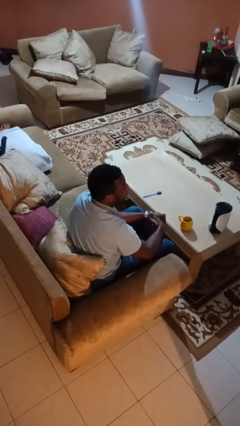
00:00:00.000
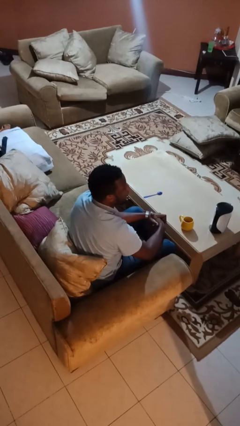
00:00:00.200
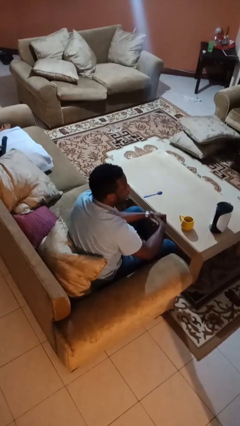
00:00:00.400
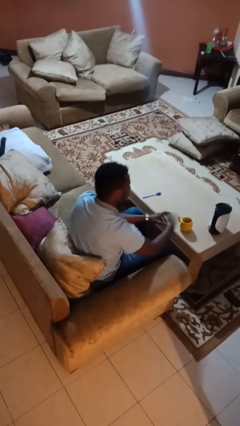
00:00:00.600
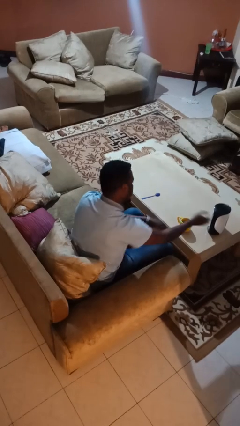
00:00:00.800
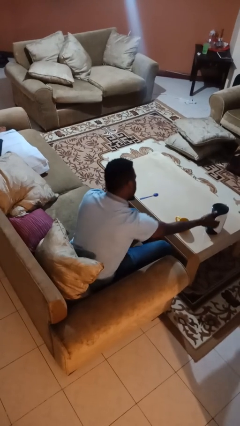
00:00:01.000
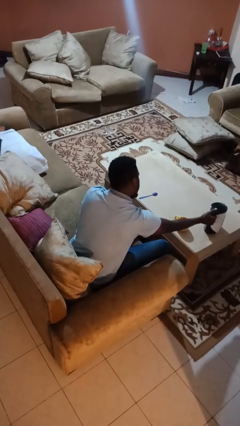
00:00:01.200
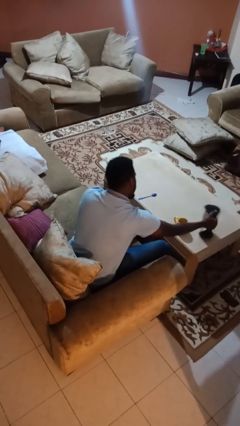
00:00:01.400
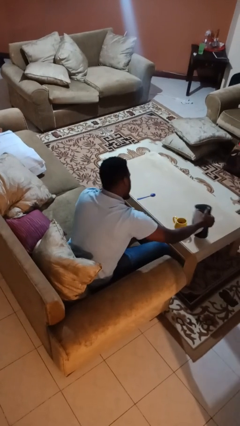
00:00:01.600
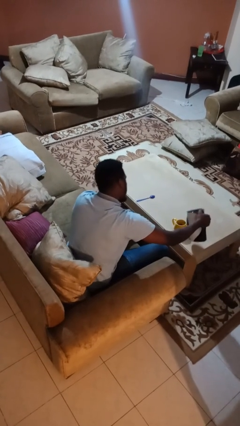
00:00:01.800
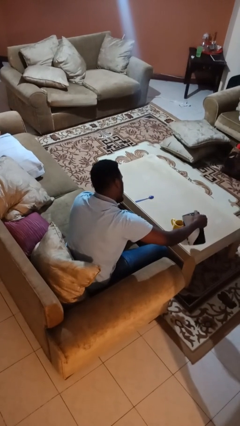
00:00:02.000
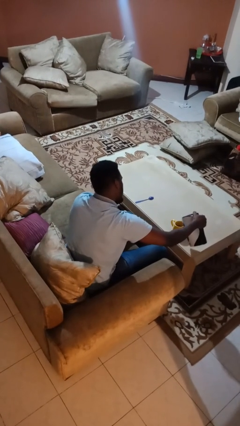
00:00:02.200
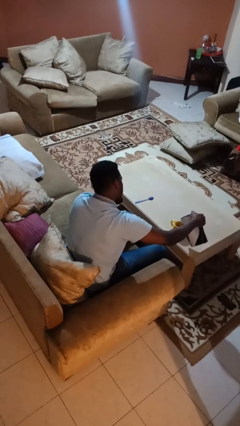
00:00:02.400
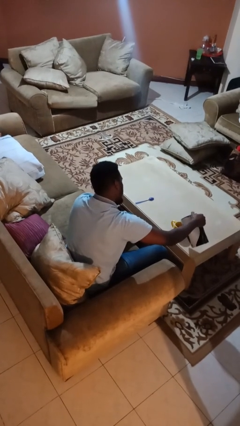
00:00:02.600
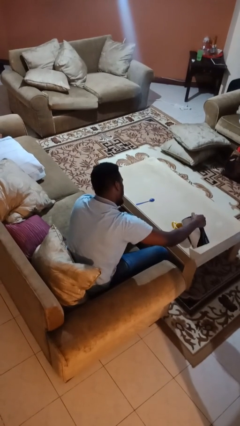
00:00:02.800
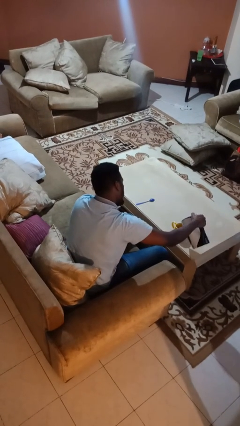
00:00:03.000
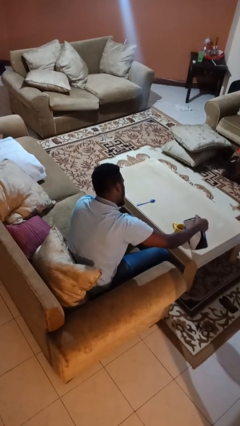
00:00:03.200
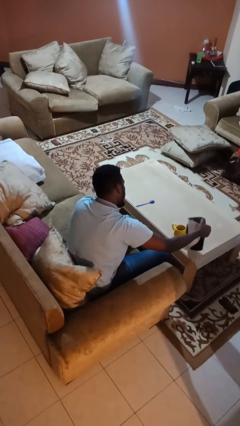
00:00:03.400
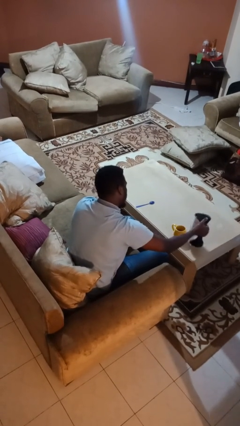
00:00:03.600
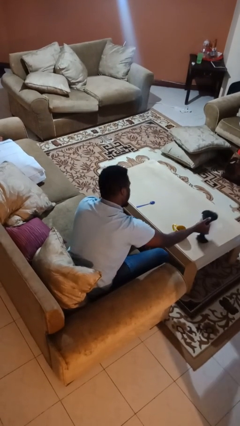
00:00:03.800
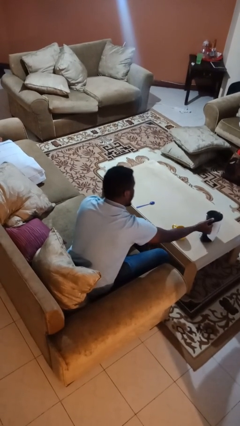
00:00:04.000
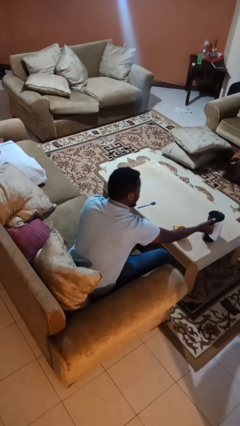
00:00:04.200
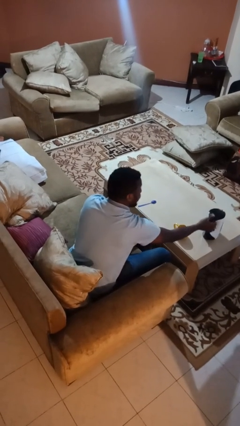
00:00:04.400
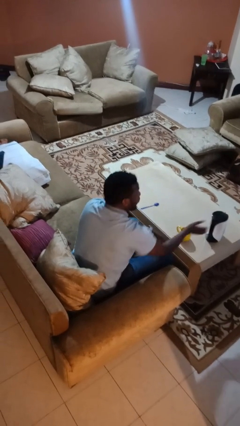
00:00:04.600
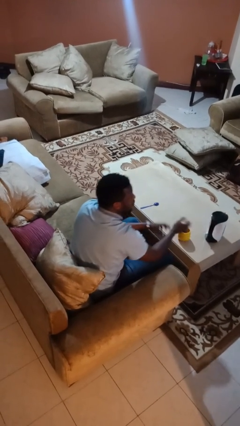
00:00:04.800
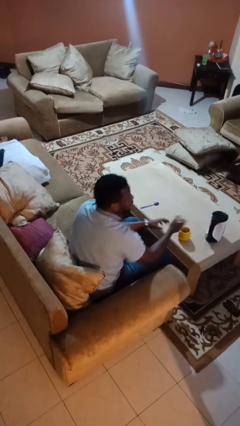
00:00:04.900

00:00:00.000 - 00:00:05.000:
person pours coffee into mug

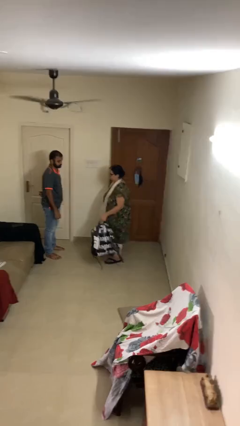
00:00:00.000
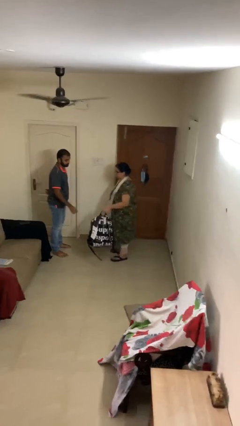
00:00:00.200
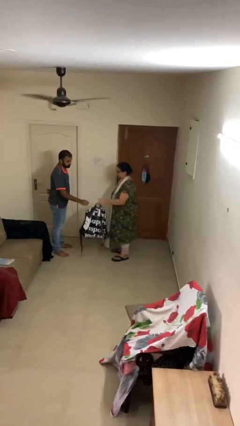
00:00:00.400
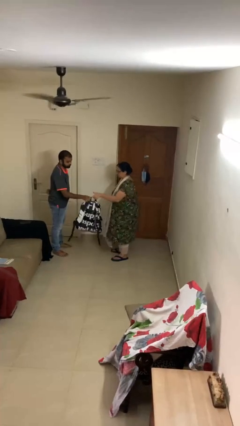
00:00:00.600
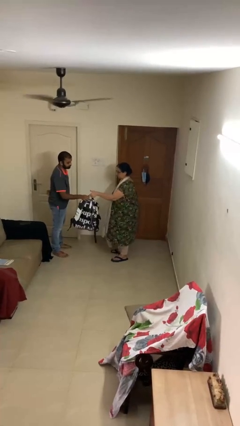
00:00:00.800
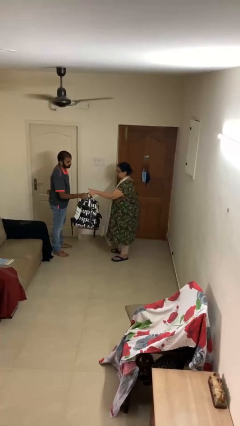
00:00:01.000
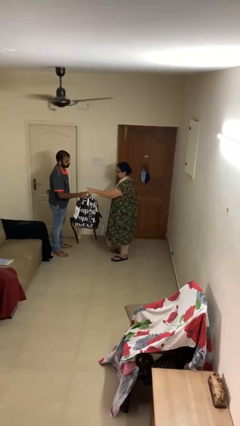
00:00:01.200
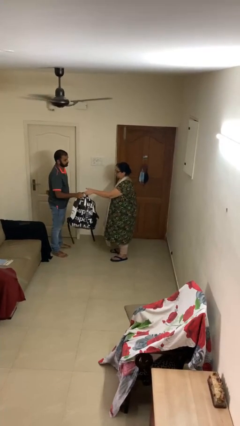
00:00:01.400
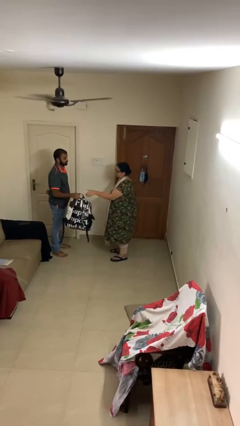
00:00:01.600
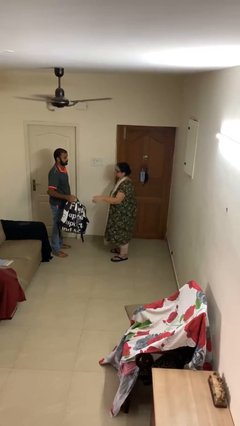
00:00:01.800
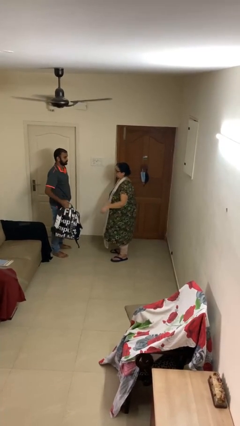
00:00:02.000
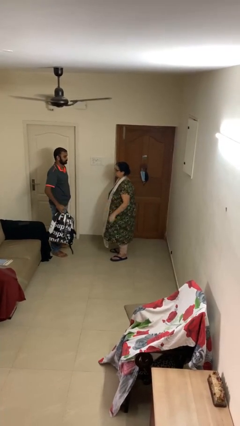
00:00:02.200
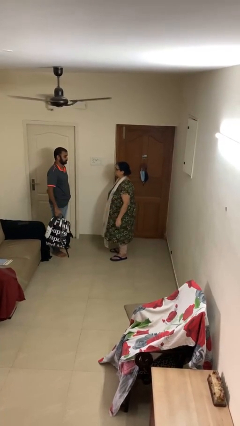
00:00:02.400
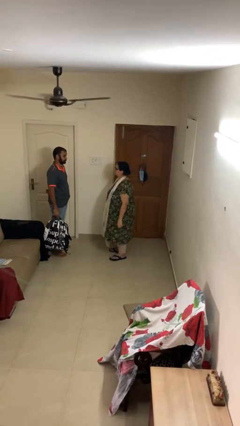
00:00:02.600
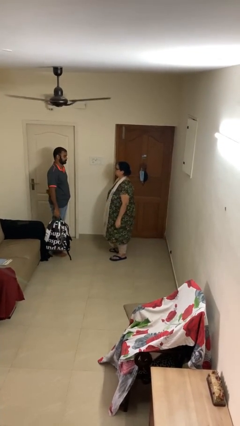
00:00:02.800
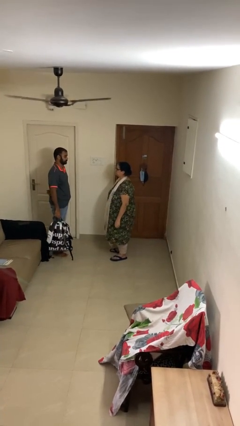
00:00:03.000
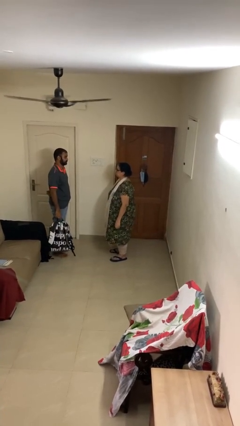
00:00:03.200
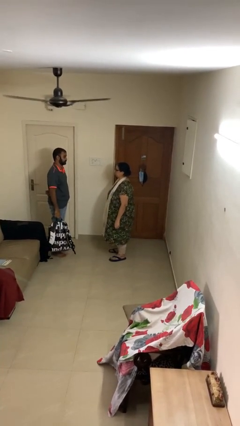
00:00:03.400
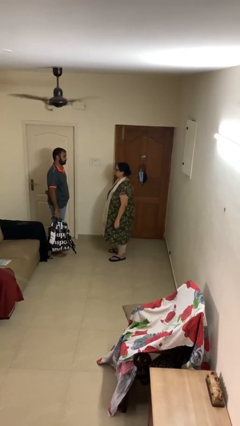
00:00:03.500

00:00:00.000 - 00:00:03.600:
person transfers object to person

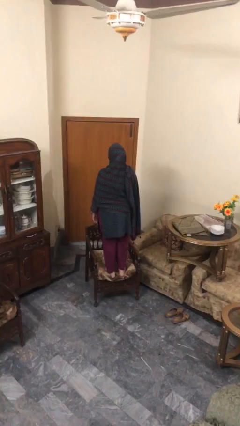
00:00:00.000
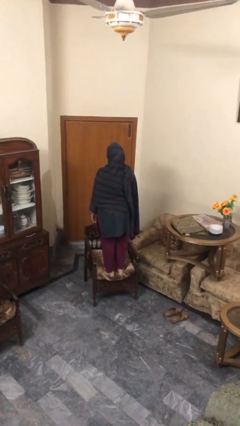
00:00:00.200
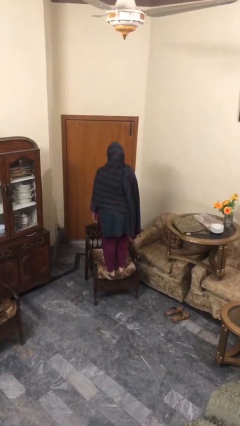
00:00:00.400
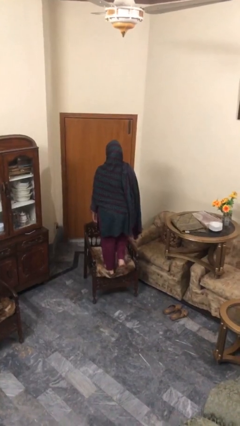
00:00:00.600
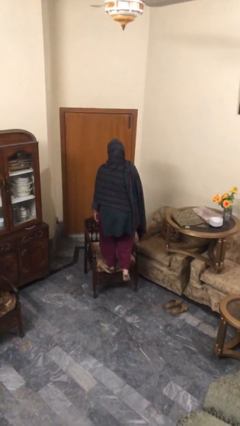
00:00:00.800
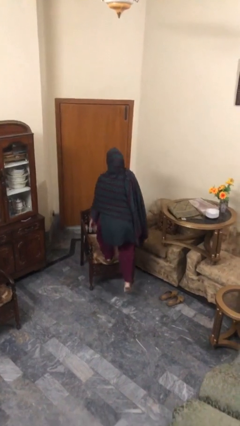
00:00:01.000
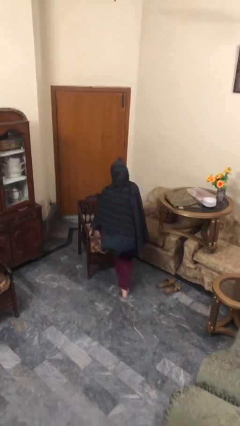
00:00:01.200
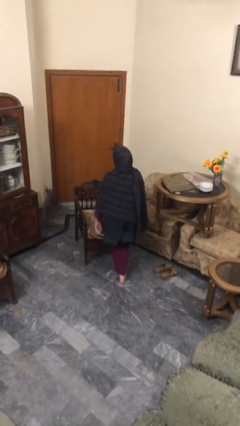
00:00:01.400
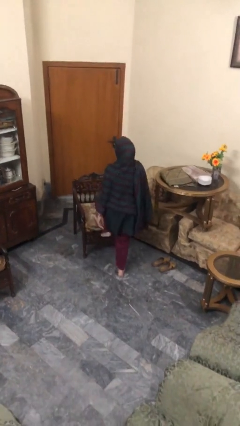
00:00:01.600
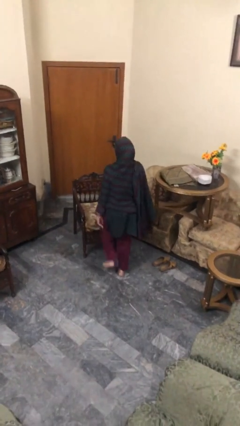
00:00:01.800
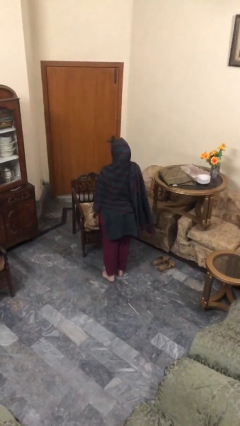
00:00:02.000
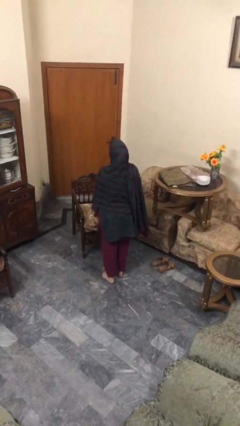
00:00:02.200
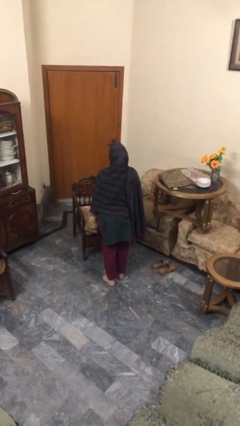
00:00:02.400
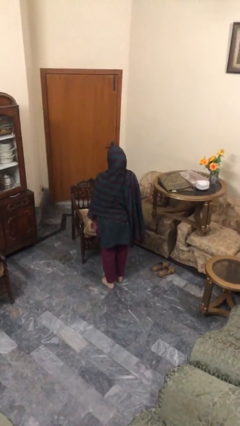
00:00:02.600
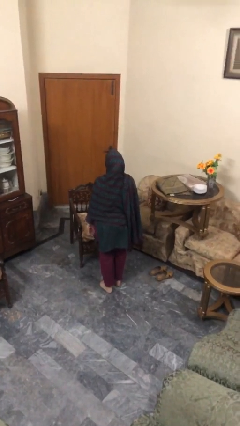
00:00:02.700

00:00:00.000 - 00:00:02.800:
person climbs off chair

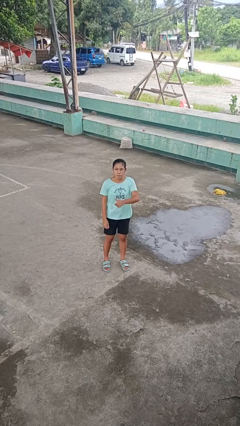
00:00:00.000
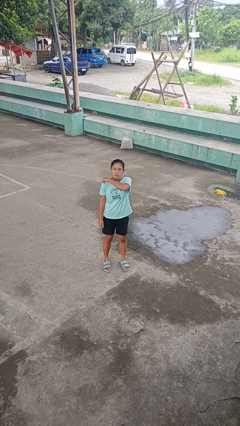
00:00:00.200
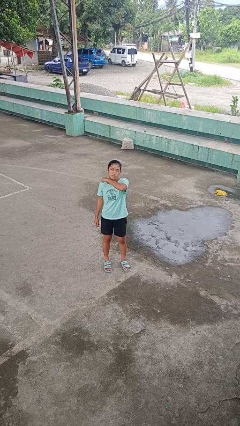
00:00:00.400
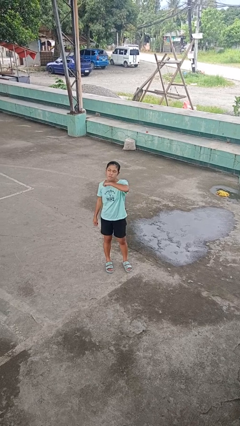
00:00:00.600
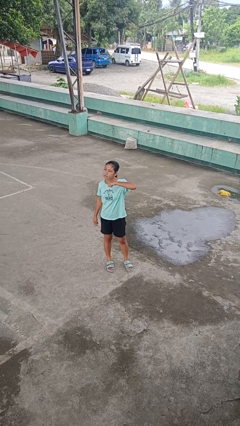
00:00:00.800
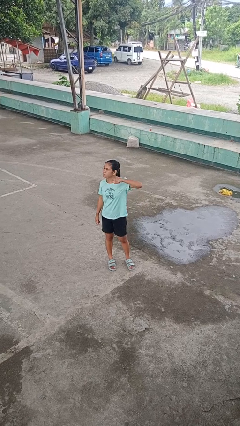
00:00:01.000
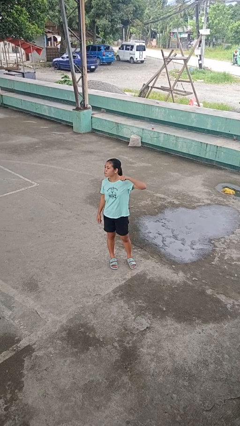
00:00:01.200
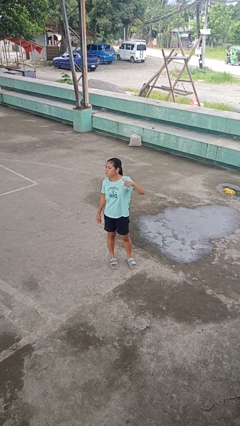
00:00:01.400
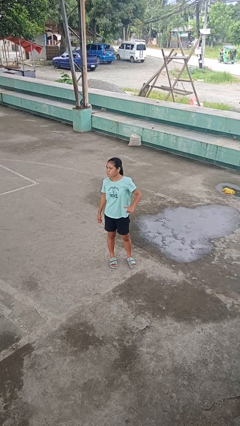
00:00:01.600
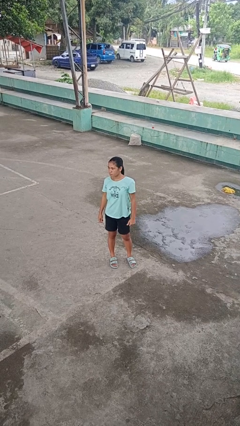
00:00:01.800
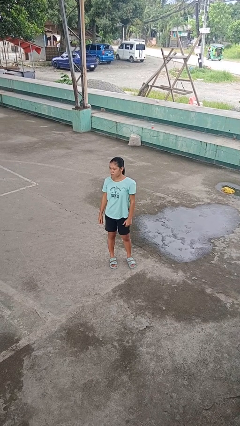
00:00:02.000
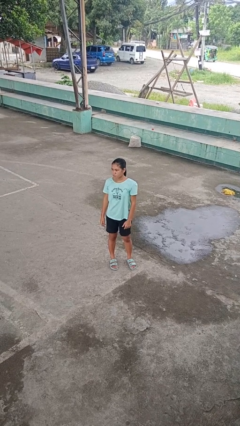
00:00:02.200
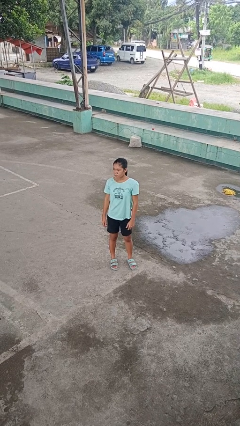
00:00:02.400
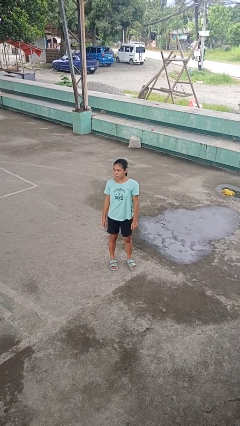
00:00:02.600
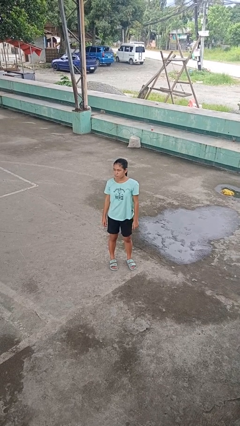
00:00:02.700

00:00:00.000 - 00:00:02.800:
person gestures cut

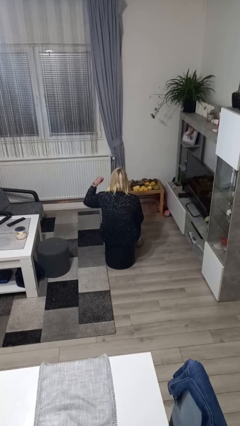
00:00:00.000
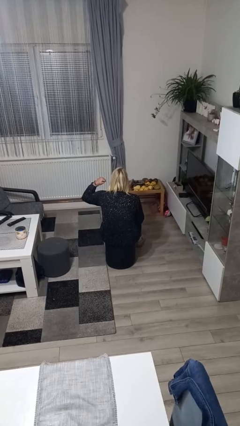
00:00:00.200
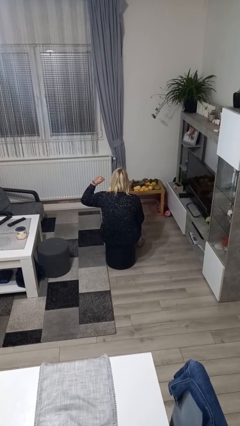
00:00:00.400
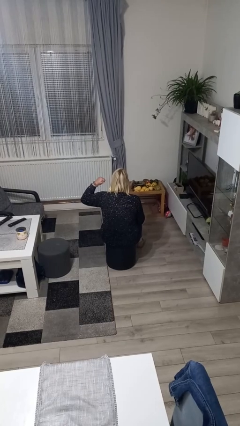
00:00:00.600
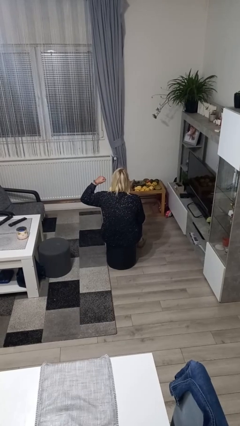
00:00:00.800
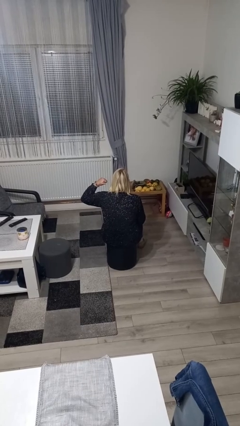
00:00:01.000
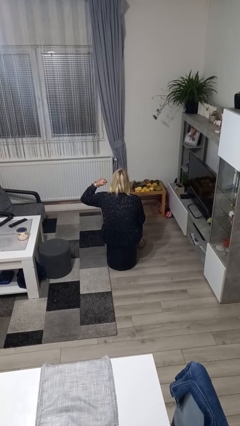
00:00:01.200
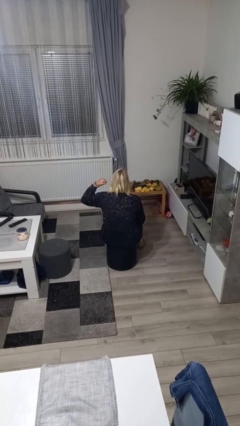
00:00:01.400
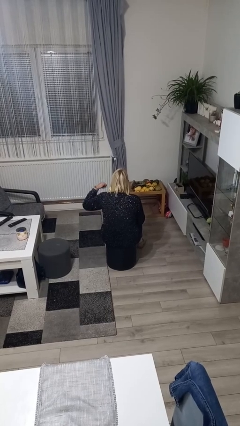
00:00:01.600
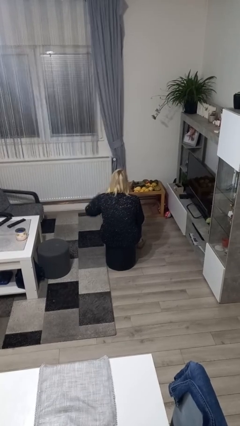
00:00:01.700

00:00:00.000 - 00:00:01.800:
person gestures behind me

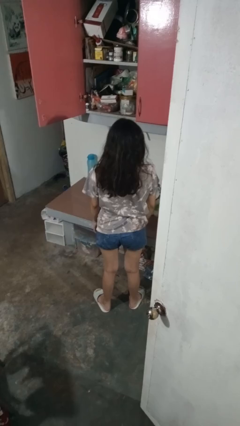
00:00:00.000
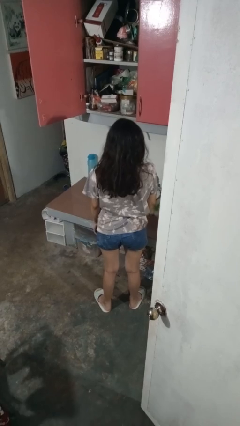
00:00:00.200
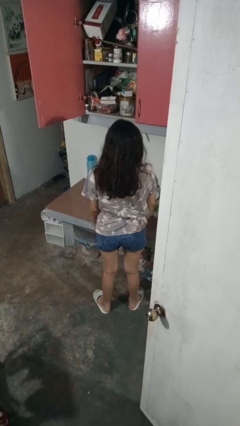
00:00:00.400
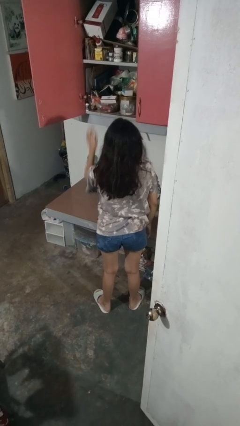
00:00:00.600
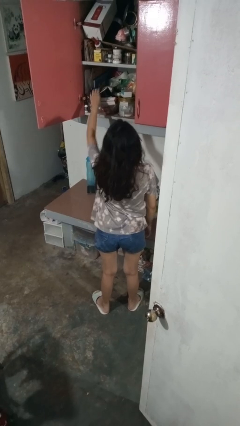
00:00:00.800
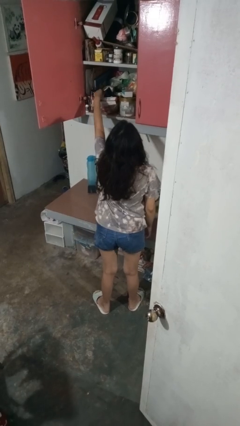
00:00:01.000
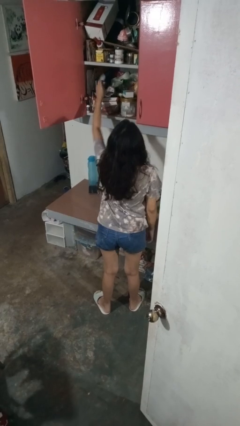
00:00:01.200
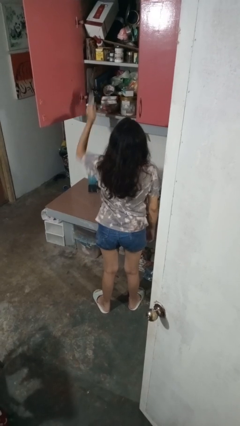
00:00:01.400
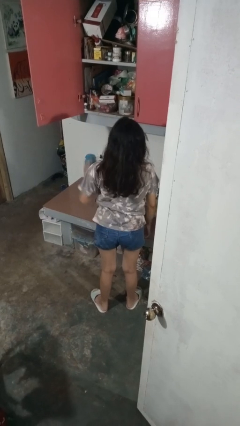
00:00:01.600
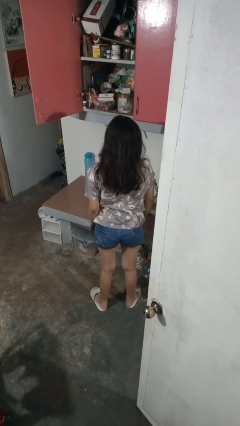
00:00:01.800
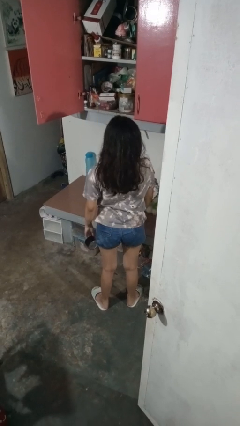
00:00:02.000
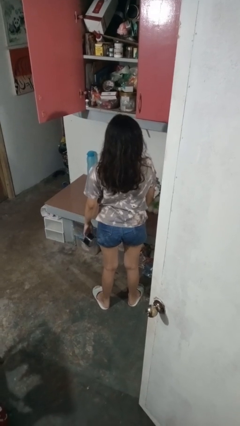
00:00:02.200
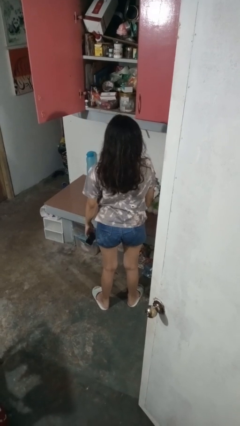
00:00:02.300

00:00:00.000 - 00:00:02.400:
person takes object from cabinet
